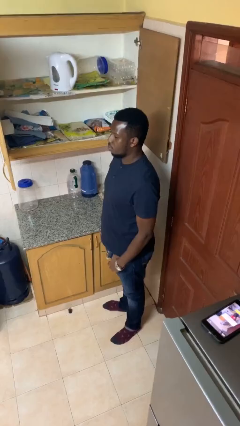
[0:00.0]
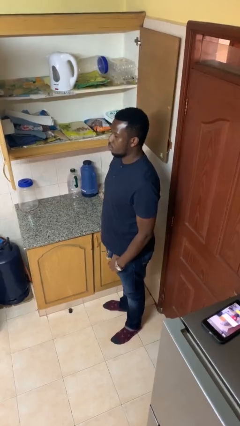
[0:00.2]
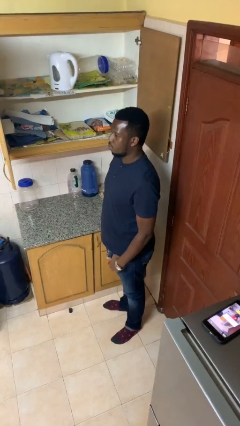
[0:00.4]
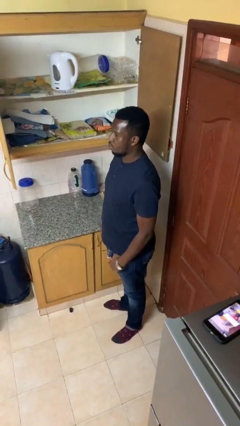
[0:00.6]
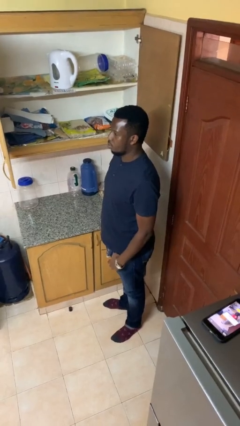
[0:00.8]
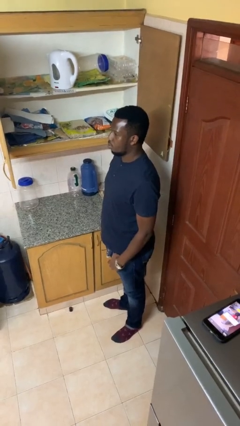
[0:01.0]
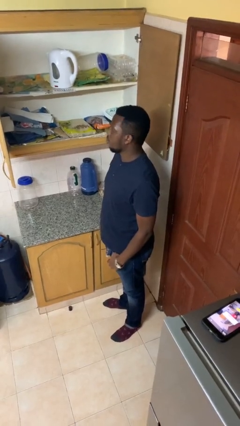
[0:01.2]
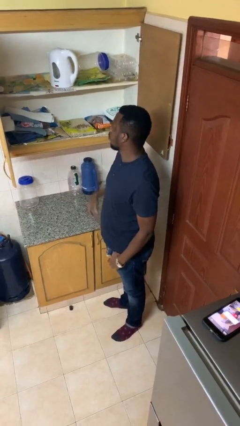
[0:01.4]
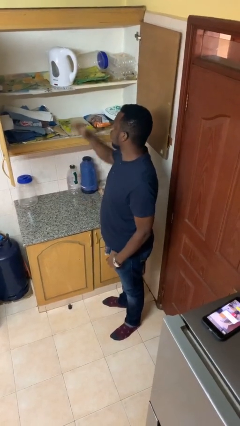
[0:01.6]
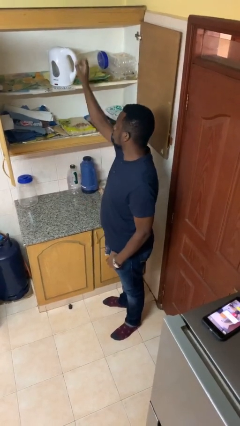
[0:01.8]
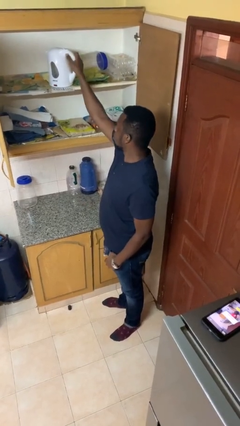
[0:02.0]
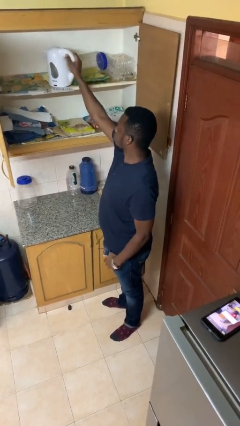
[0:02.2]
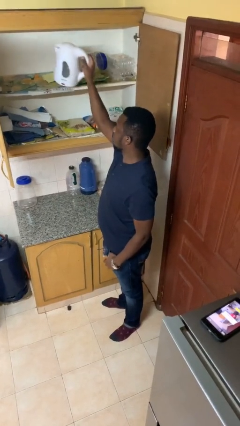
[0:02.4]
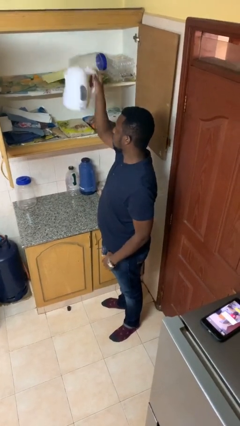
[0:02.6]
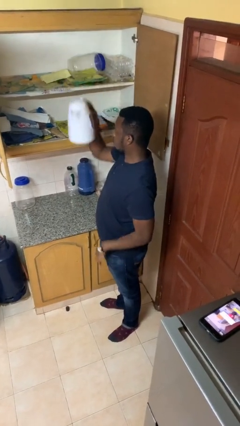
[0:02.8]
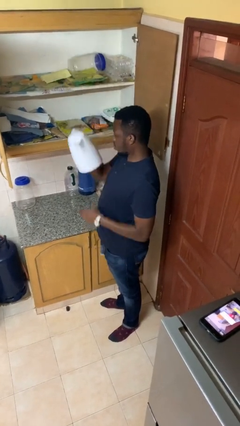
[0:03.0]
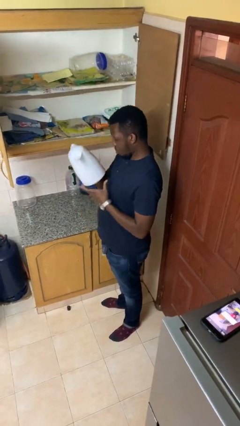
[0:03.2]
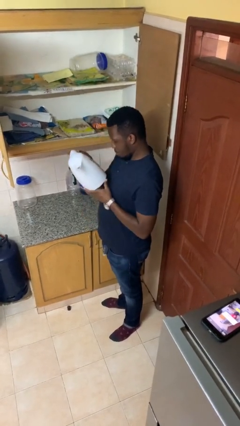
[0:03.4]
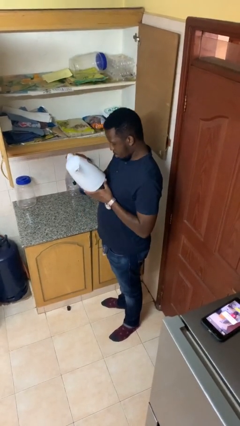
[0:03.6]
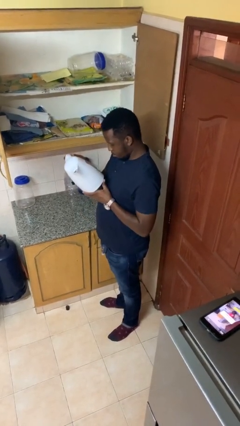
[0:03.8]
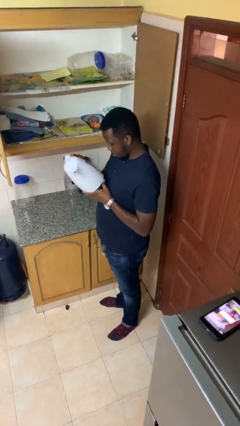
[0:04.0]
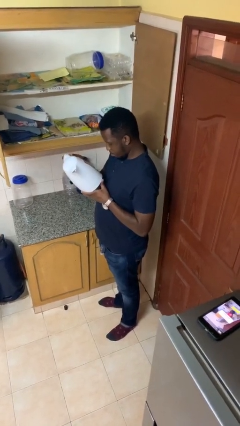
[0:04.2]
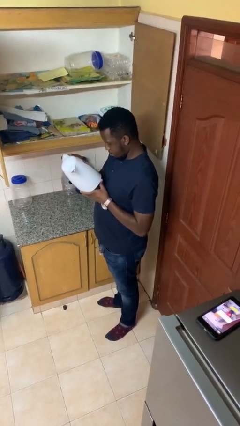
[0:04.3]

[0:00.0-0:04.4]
person picks up object from shelf

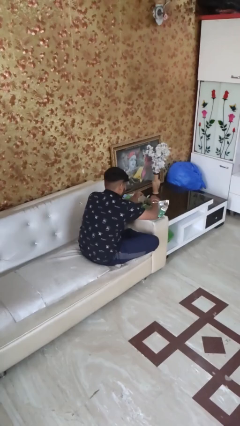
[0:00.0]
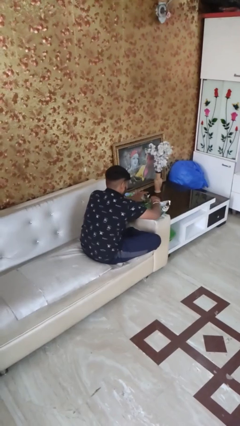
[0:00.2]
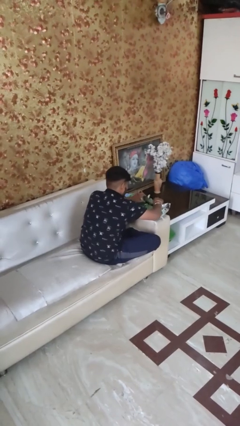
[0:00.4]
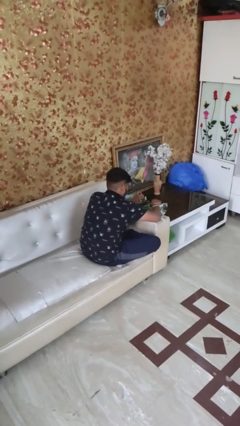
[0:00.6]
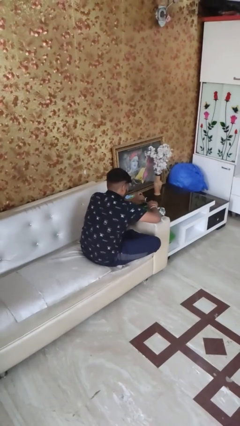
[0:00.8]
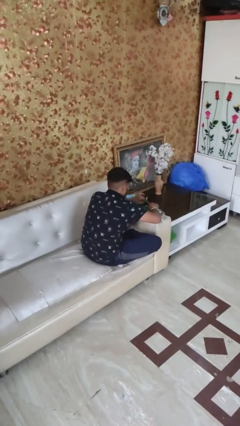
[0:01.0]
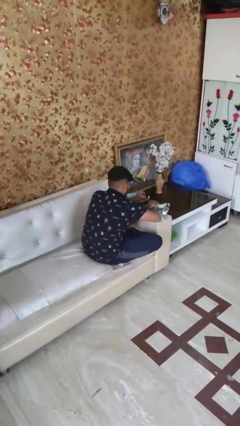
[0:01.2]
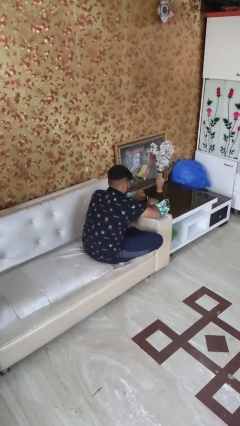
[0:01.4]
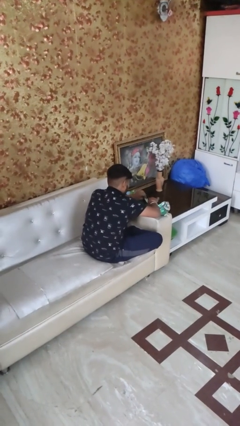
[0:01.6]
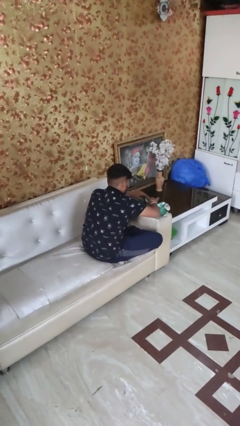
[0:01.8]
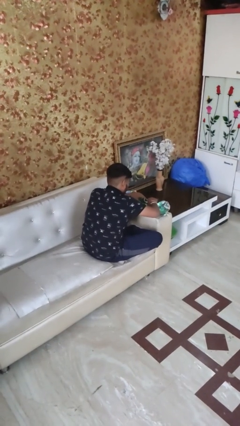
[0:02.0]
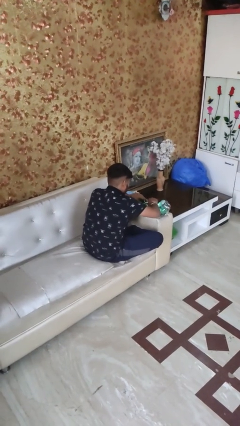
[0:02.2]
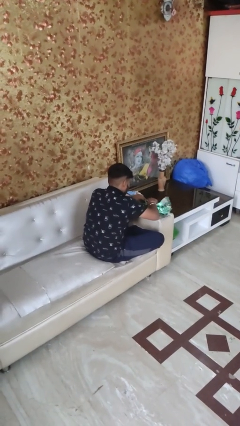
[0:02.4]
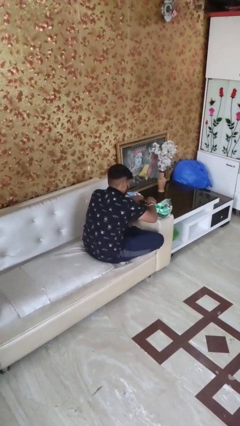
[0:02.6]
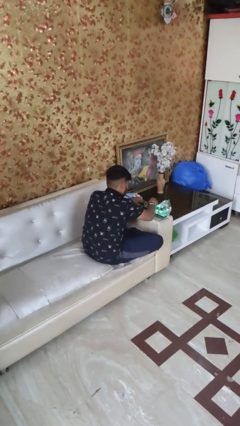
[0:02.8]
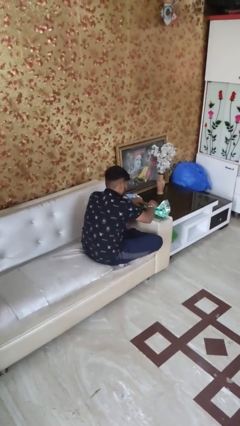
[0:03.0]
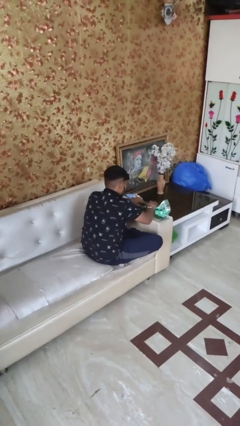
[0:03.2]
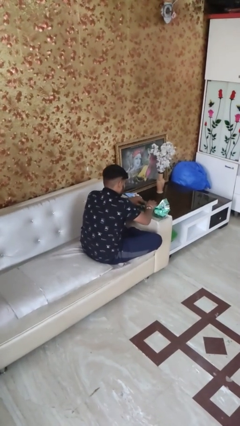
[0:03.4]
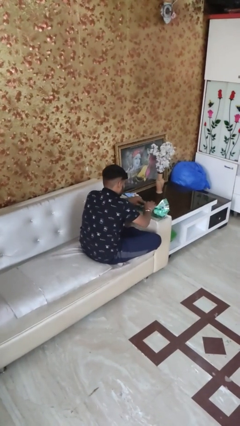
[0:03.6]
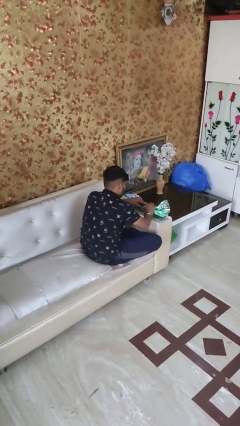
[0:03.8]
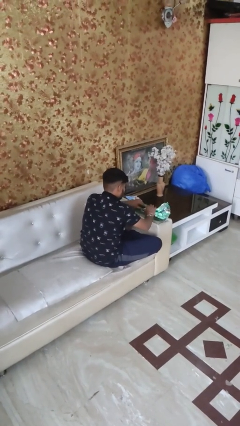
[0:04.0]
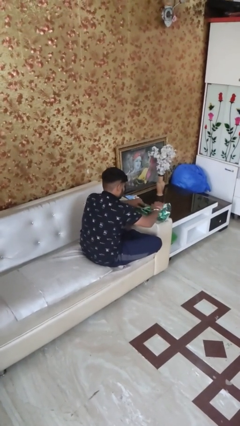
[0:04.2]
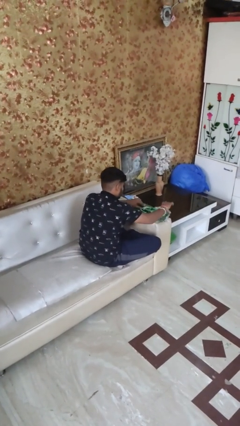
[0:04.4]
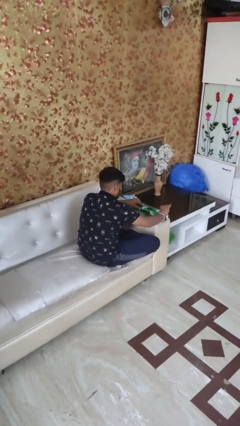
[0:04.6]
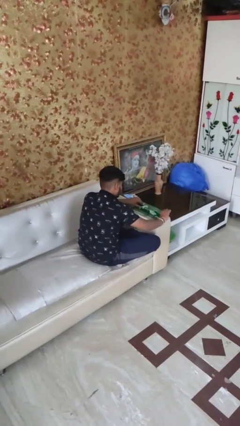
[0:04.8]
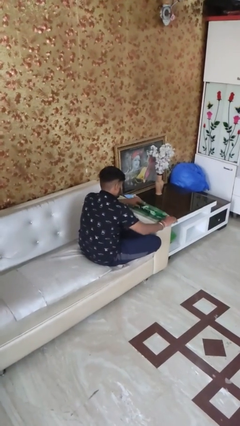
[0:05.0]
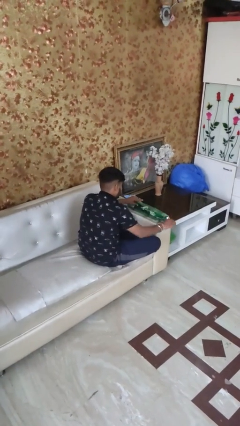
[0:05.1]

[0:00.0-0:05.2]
person wraps box

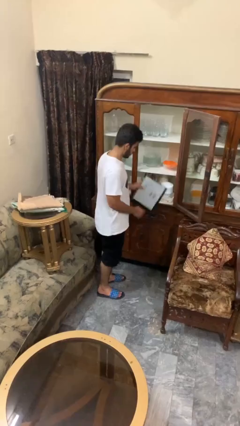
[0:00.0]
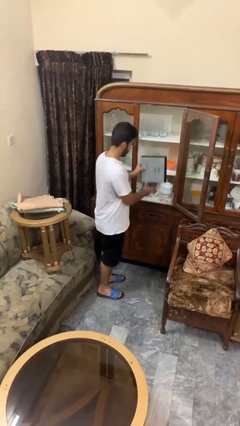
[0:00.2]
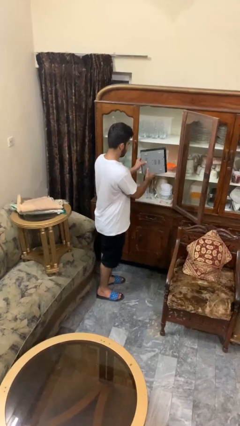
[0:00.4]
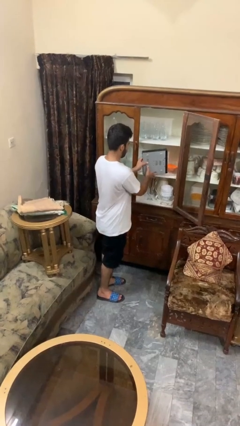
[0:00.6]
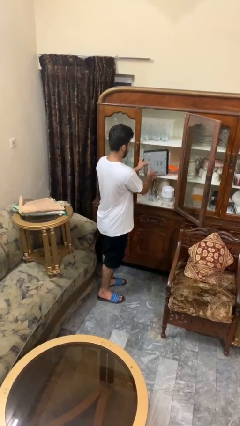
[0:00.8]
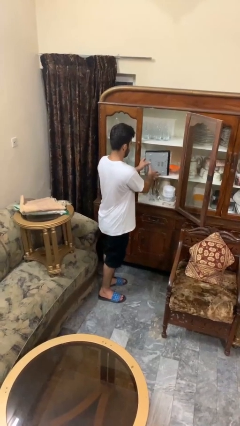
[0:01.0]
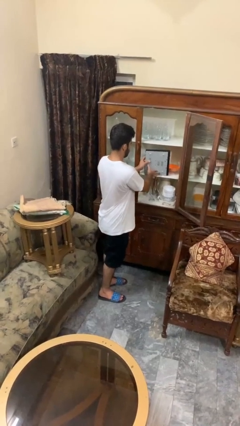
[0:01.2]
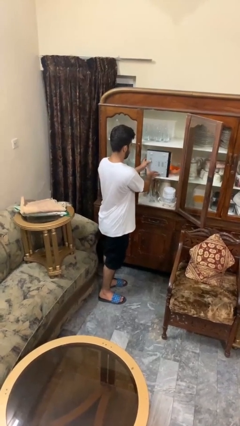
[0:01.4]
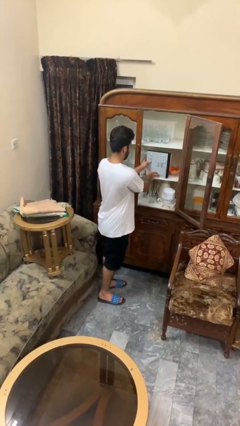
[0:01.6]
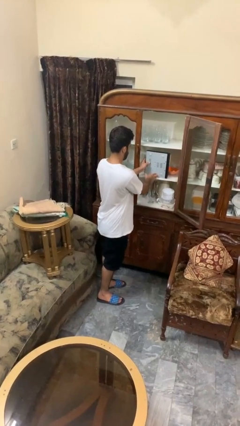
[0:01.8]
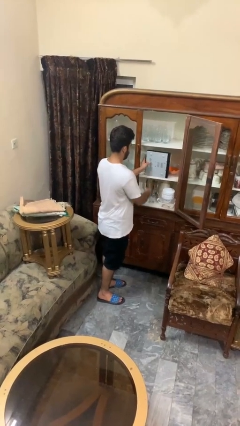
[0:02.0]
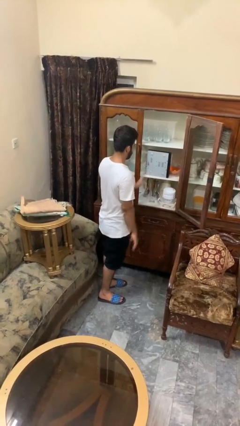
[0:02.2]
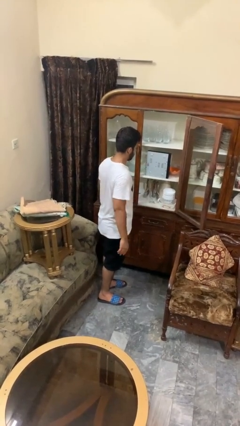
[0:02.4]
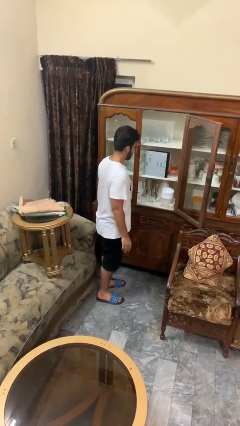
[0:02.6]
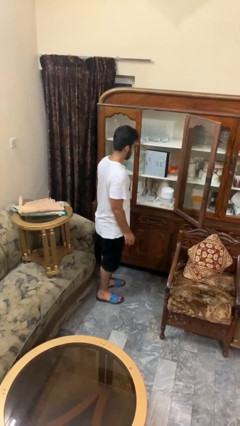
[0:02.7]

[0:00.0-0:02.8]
person puts down object into cabinet

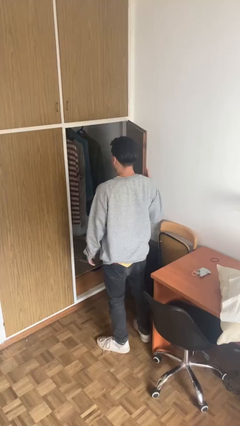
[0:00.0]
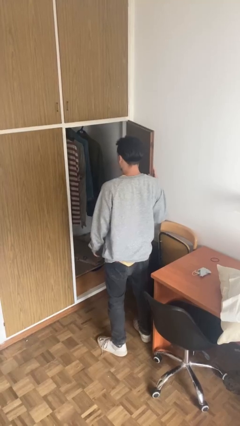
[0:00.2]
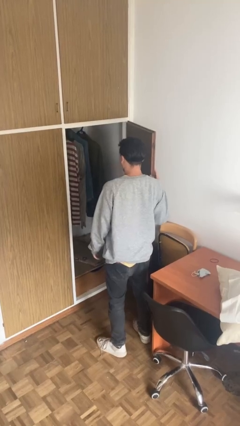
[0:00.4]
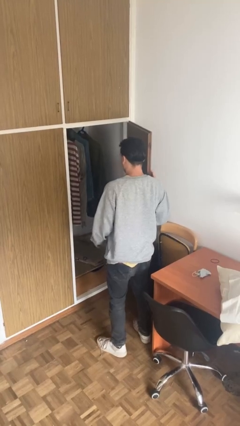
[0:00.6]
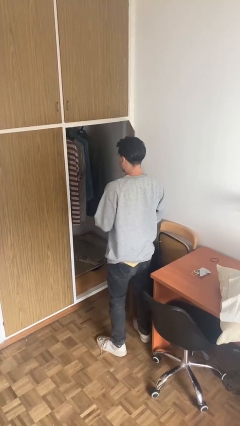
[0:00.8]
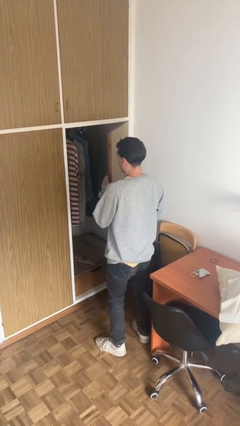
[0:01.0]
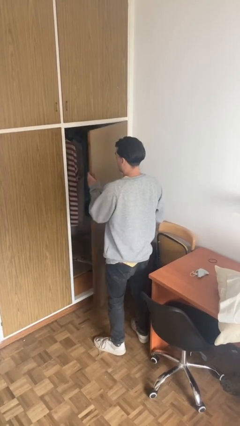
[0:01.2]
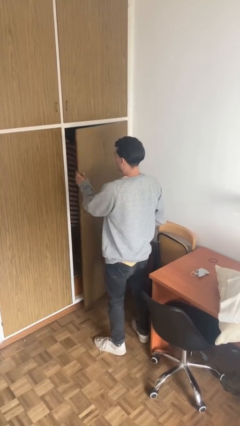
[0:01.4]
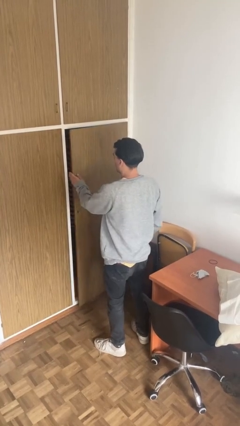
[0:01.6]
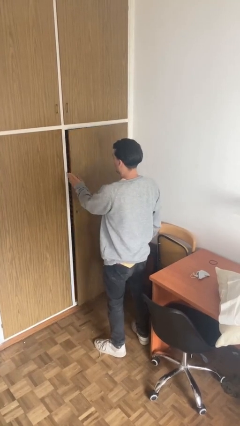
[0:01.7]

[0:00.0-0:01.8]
person closes closet door

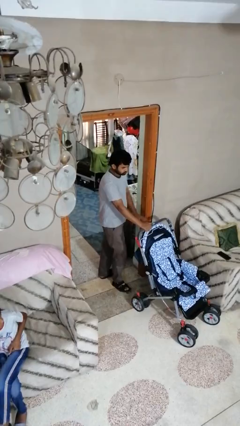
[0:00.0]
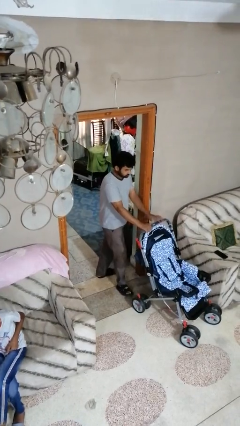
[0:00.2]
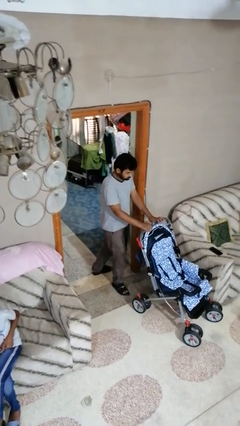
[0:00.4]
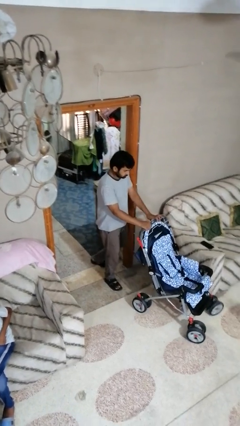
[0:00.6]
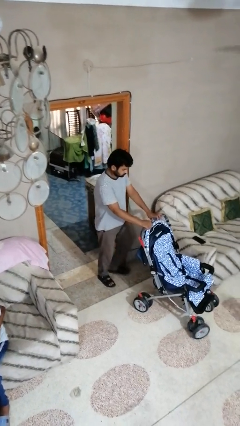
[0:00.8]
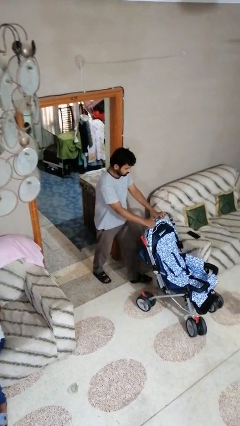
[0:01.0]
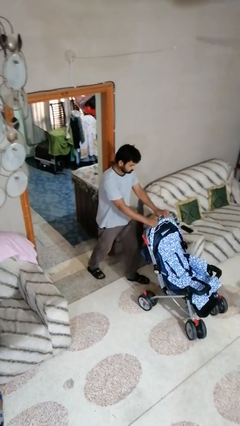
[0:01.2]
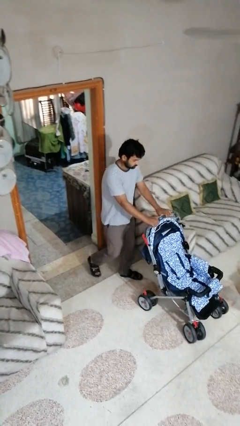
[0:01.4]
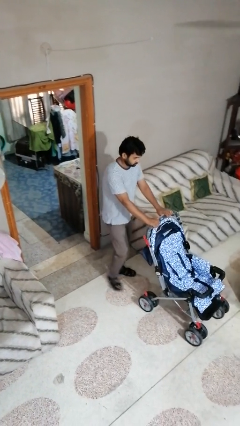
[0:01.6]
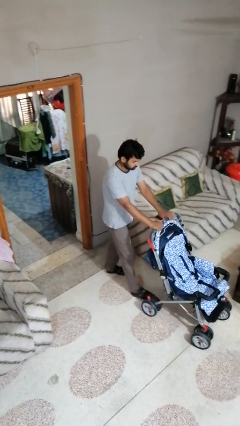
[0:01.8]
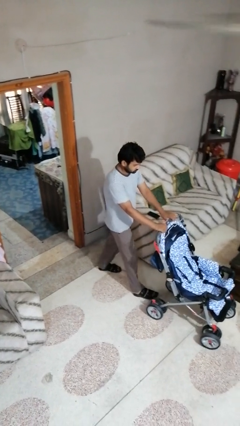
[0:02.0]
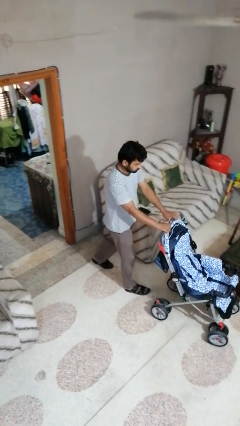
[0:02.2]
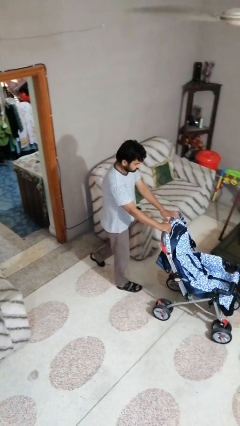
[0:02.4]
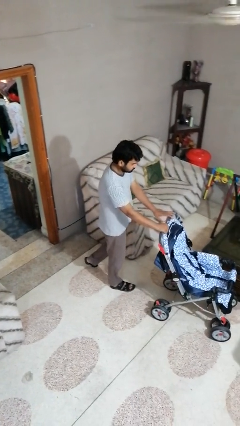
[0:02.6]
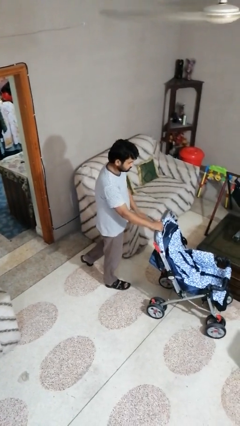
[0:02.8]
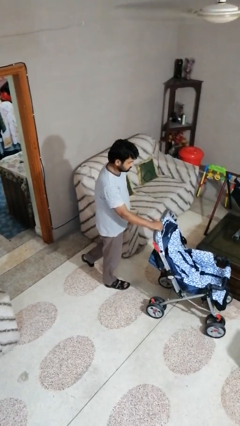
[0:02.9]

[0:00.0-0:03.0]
person pushes wheeled cart

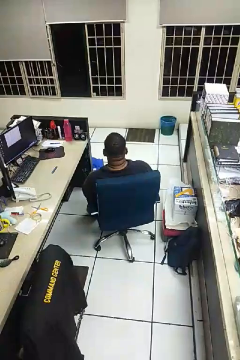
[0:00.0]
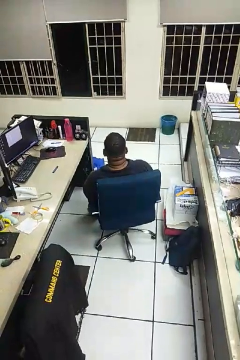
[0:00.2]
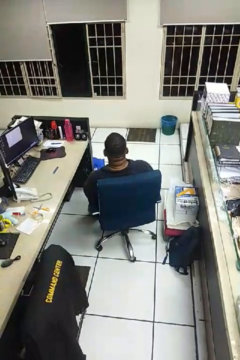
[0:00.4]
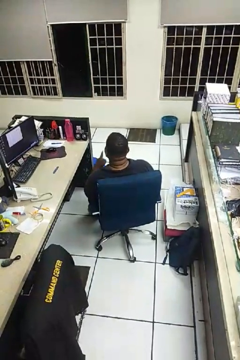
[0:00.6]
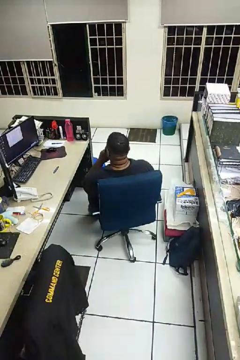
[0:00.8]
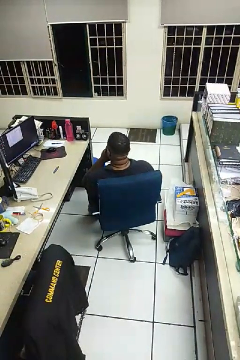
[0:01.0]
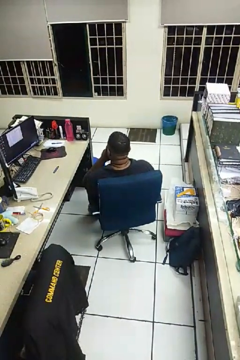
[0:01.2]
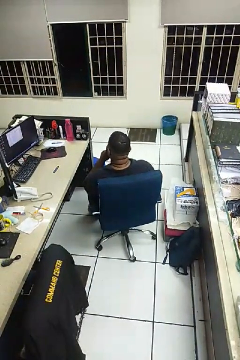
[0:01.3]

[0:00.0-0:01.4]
person gestures be quiet
